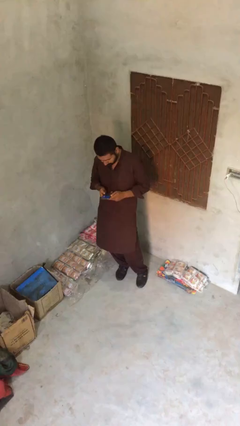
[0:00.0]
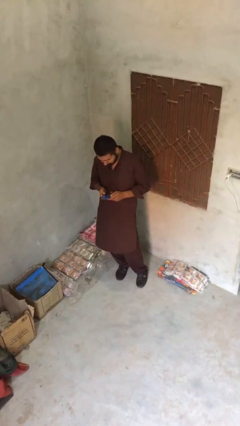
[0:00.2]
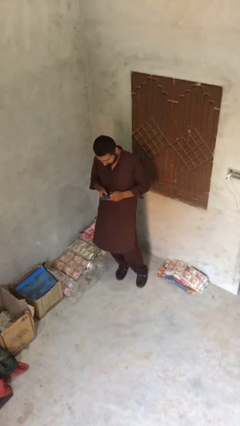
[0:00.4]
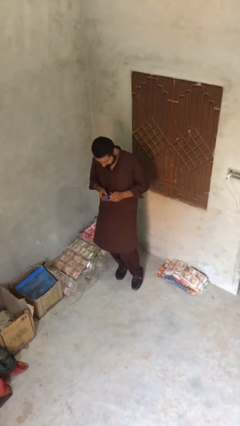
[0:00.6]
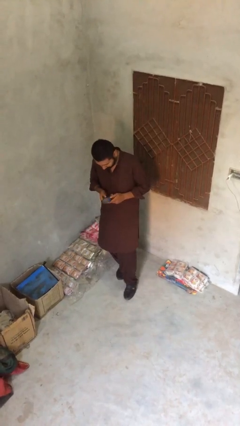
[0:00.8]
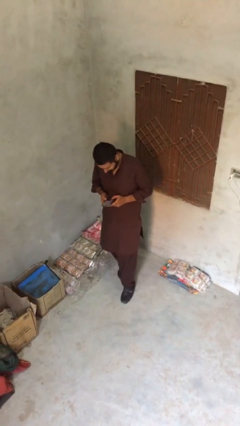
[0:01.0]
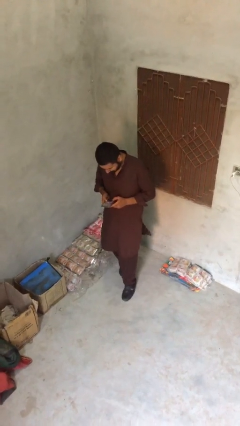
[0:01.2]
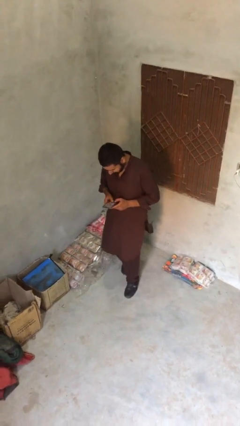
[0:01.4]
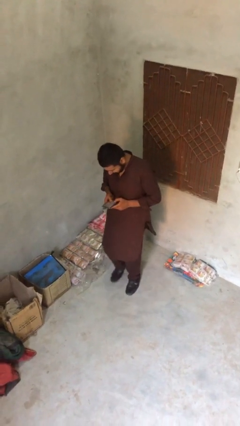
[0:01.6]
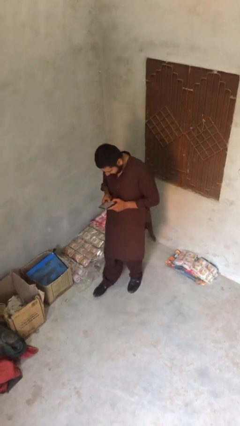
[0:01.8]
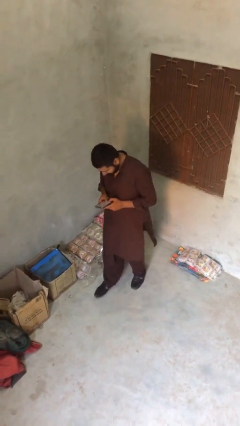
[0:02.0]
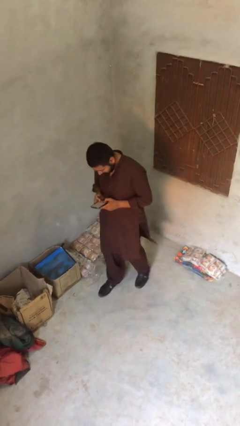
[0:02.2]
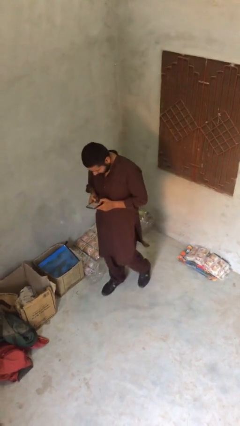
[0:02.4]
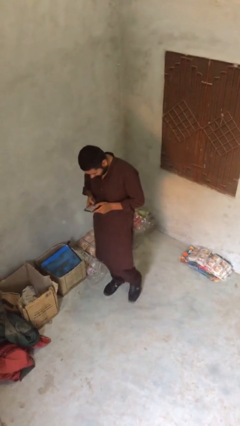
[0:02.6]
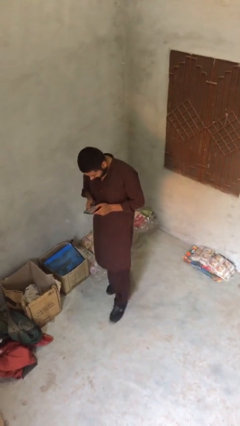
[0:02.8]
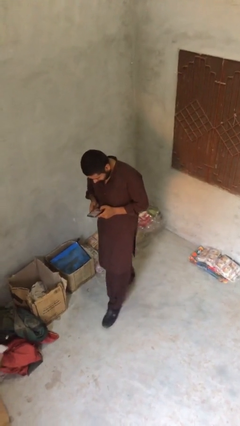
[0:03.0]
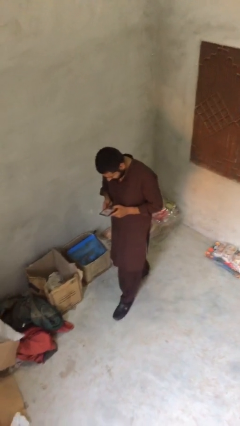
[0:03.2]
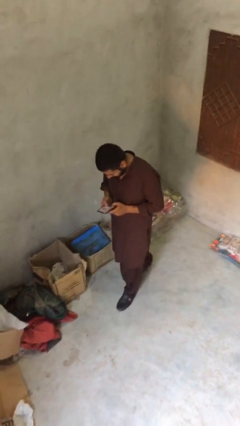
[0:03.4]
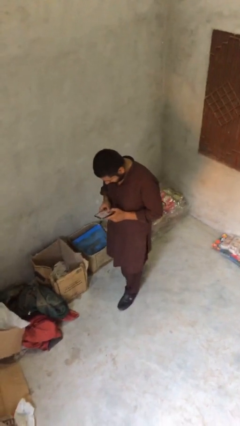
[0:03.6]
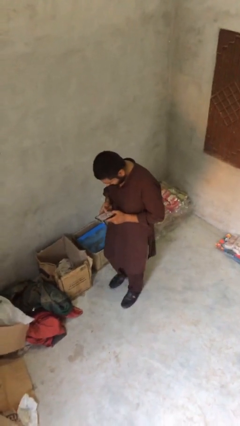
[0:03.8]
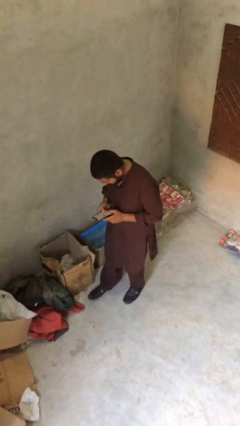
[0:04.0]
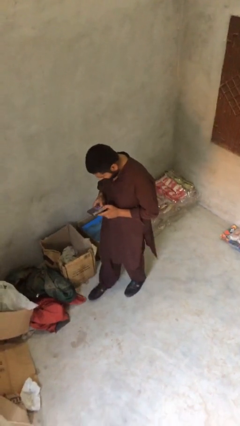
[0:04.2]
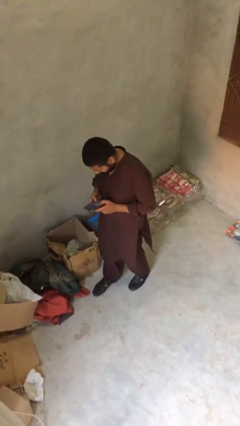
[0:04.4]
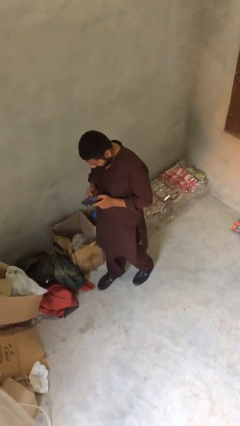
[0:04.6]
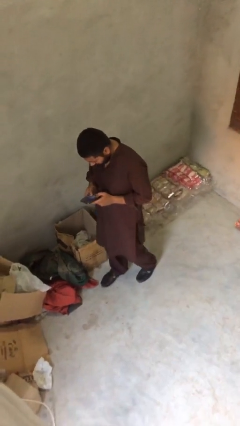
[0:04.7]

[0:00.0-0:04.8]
person texts on phone

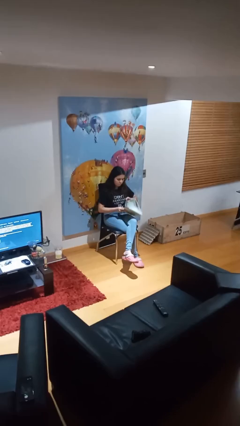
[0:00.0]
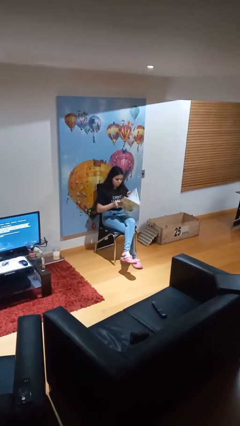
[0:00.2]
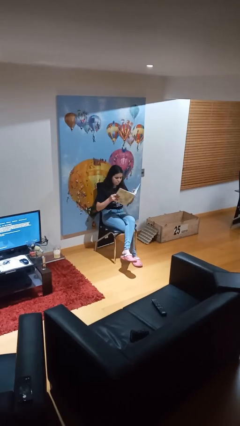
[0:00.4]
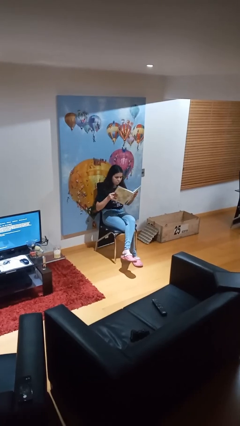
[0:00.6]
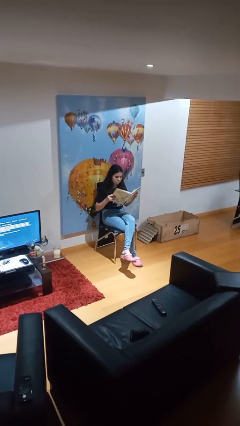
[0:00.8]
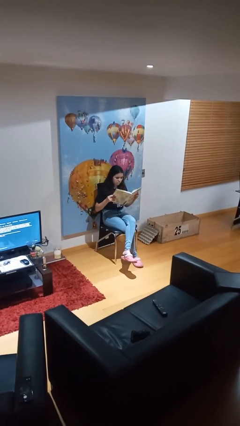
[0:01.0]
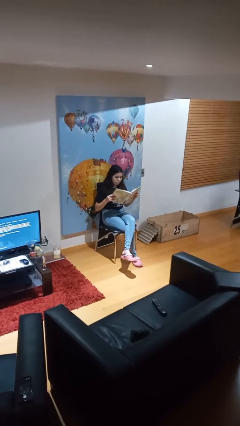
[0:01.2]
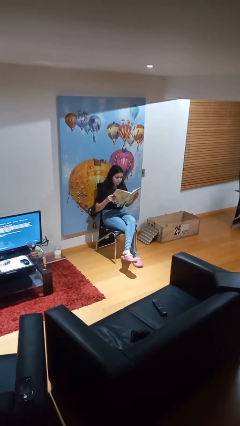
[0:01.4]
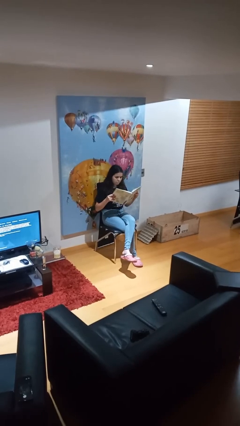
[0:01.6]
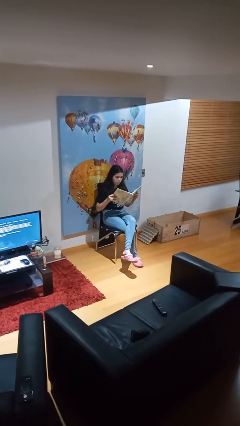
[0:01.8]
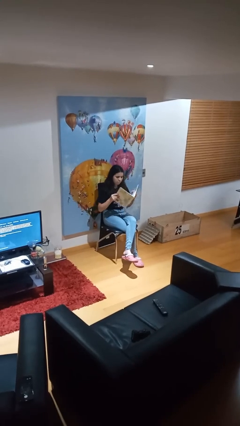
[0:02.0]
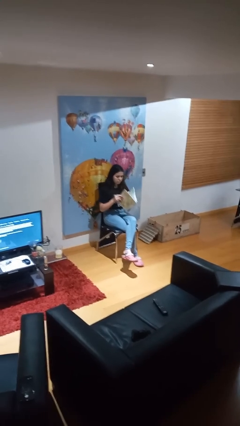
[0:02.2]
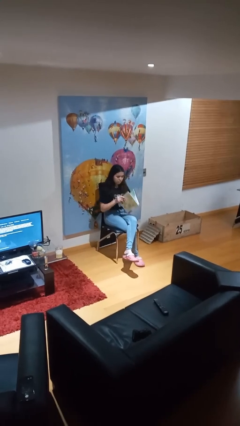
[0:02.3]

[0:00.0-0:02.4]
person reads document

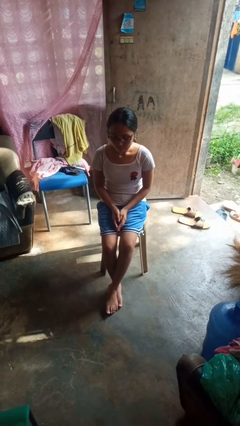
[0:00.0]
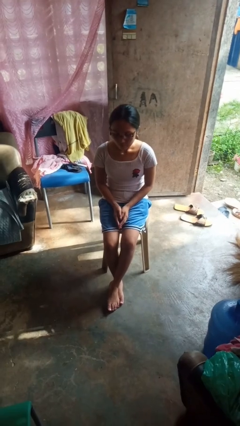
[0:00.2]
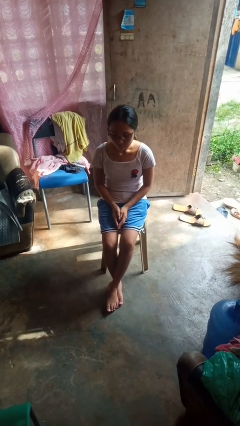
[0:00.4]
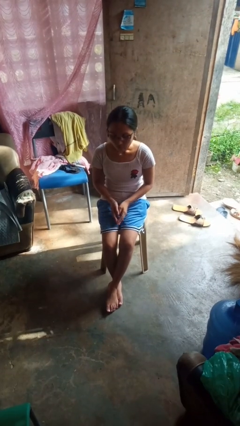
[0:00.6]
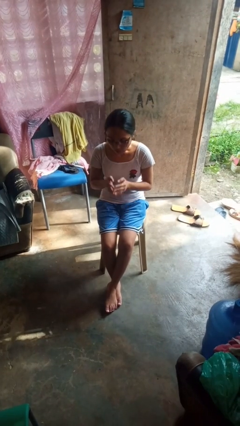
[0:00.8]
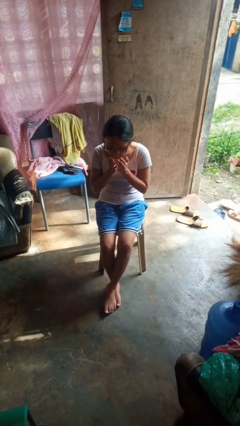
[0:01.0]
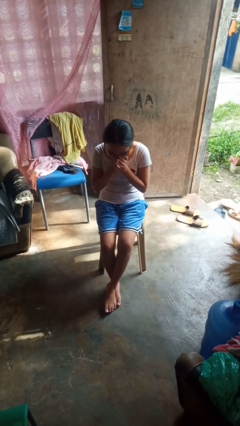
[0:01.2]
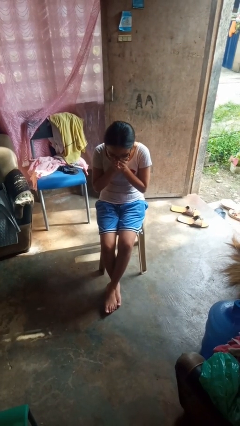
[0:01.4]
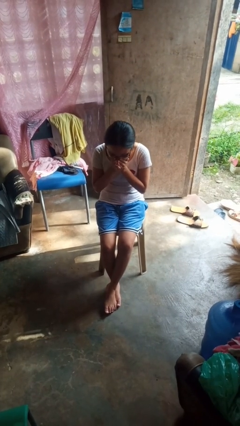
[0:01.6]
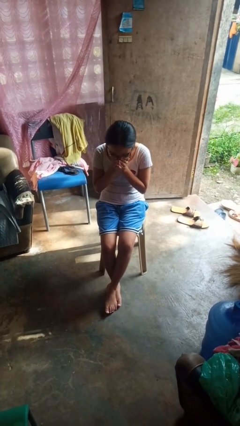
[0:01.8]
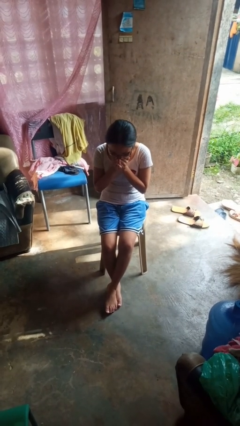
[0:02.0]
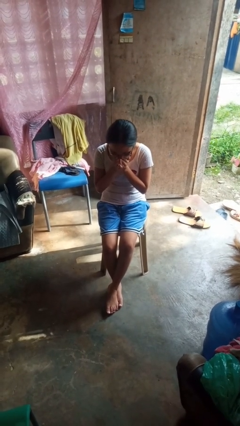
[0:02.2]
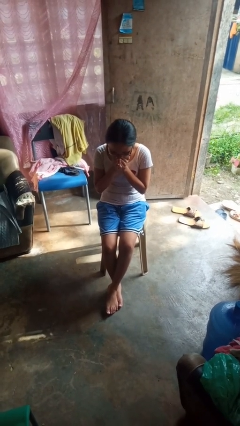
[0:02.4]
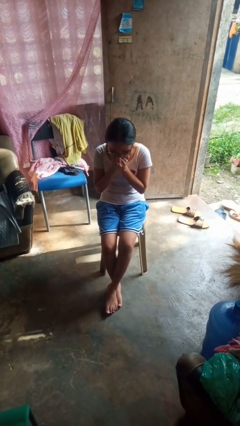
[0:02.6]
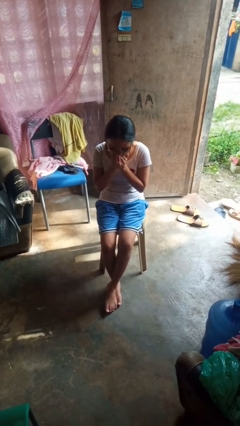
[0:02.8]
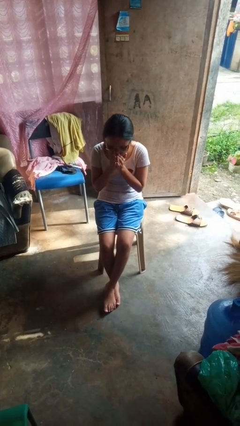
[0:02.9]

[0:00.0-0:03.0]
person sneezes into hand

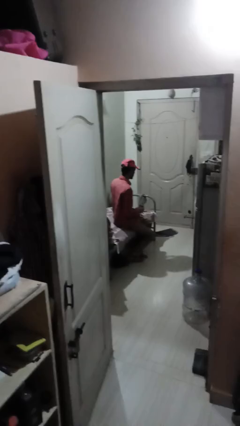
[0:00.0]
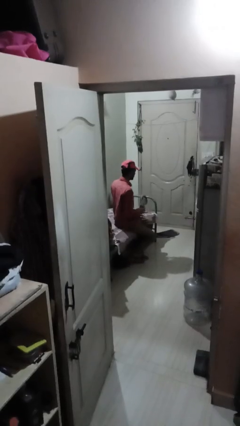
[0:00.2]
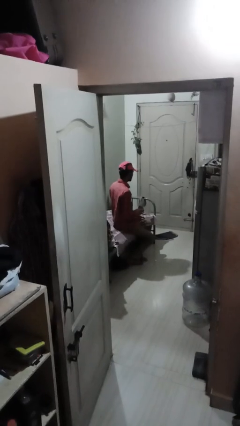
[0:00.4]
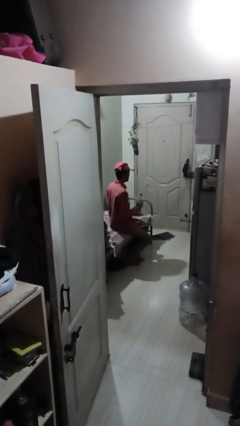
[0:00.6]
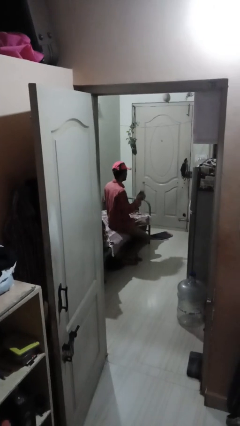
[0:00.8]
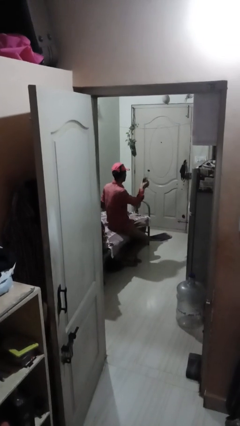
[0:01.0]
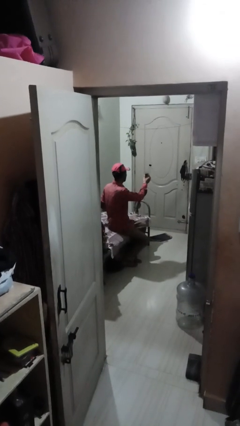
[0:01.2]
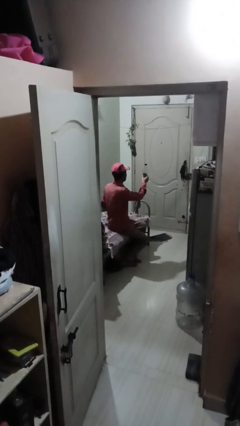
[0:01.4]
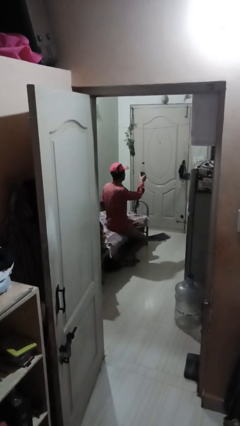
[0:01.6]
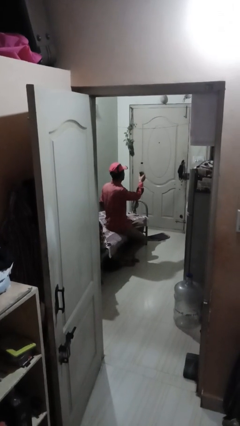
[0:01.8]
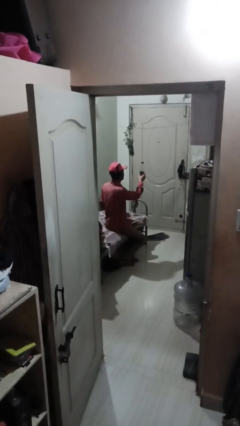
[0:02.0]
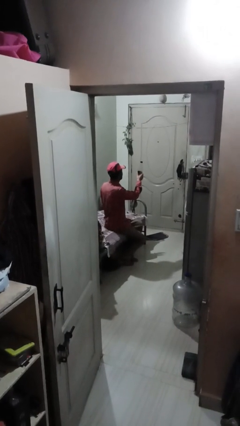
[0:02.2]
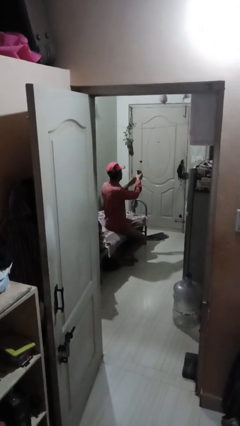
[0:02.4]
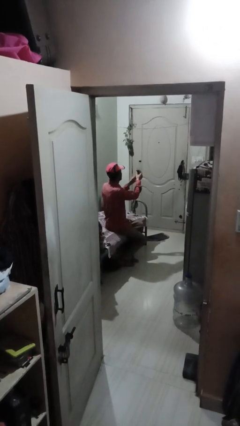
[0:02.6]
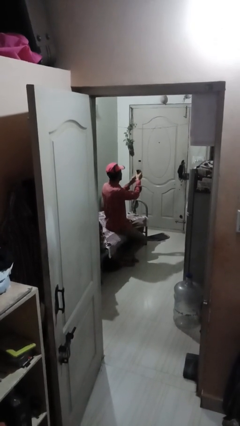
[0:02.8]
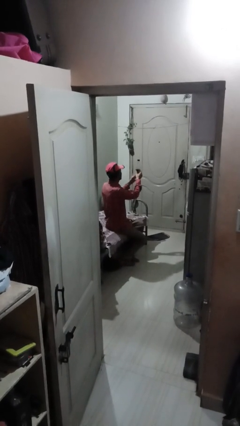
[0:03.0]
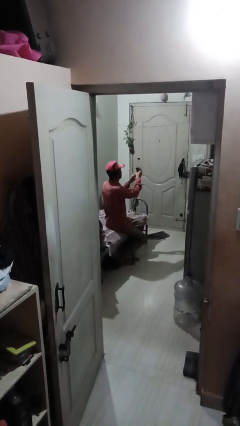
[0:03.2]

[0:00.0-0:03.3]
person squeezes object

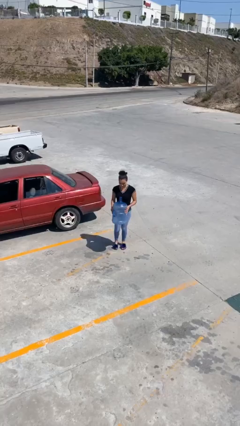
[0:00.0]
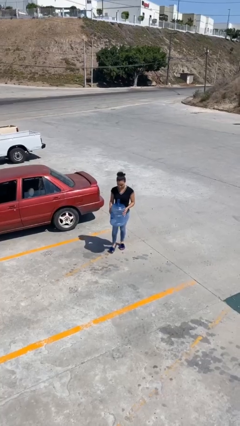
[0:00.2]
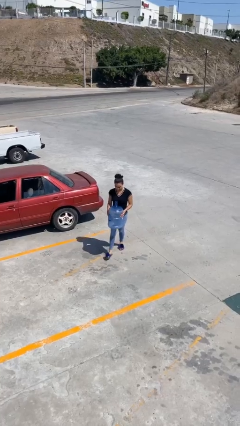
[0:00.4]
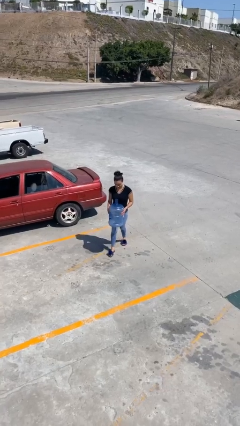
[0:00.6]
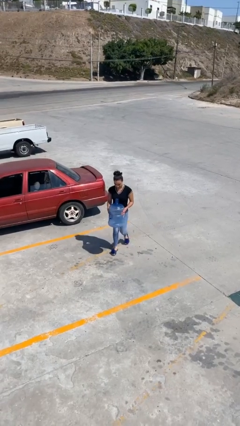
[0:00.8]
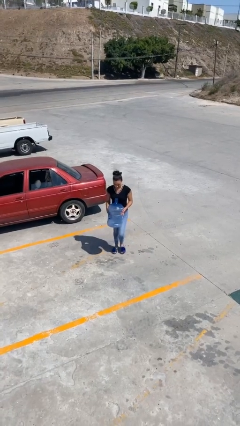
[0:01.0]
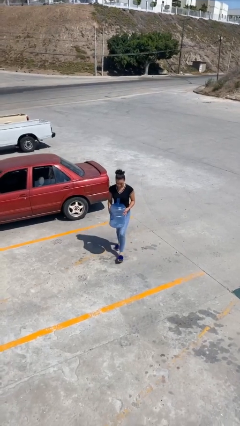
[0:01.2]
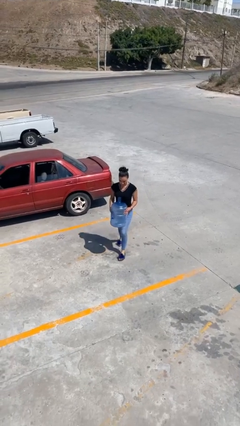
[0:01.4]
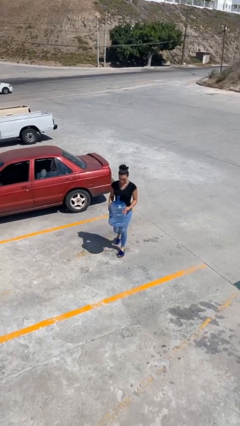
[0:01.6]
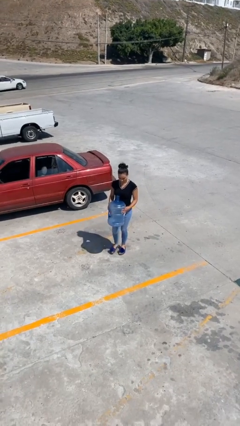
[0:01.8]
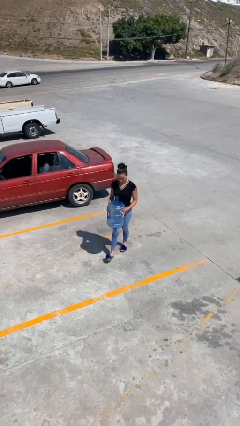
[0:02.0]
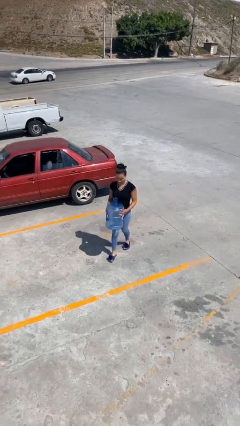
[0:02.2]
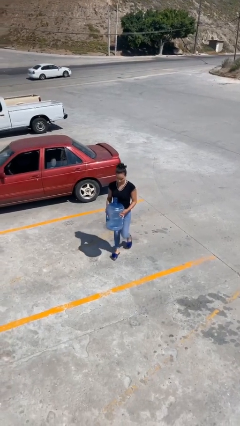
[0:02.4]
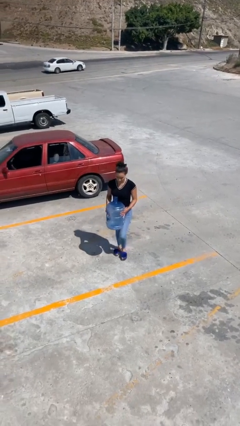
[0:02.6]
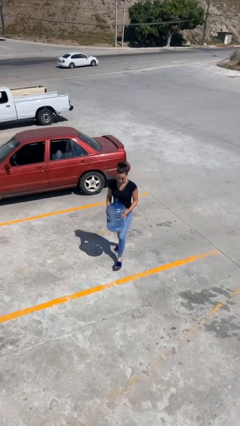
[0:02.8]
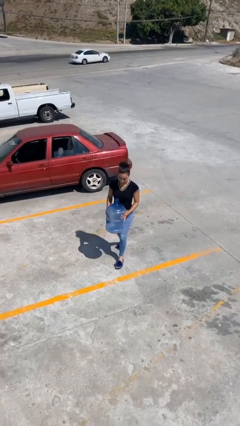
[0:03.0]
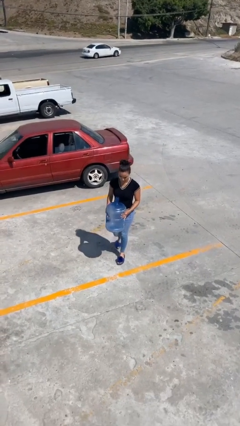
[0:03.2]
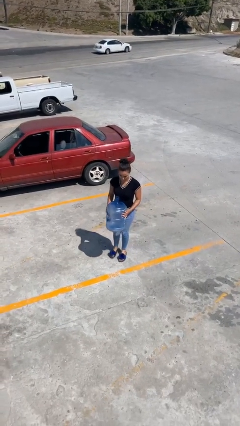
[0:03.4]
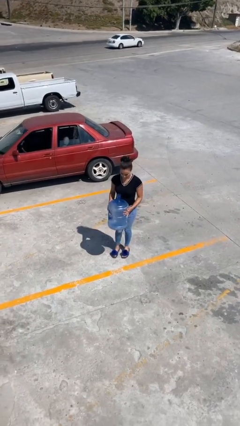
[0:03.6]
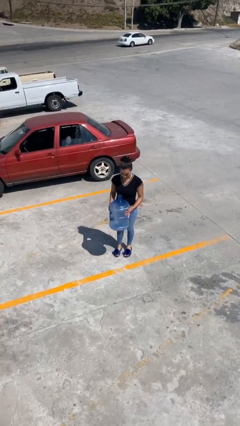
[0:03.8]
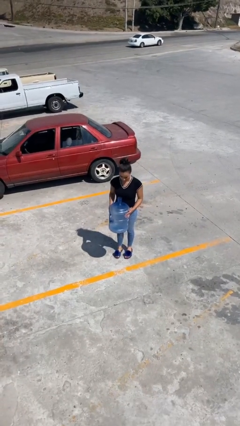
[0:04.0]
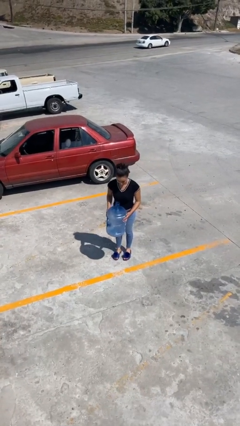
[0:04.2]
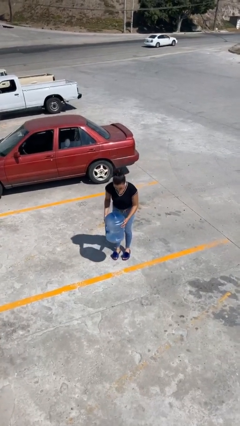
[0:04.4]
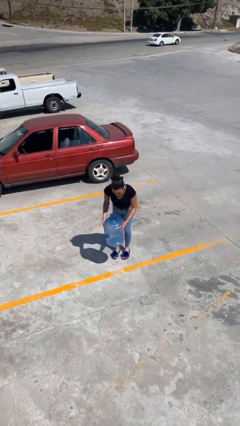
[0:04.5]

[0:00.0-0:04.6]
person carries heavy object
